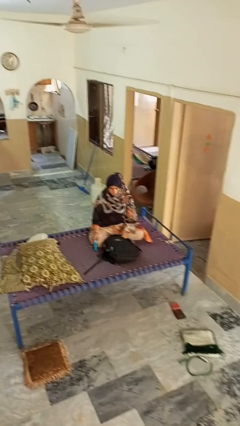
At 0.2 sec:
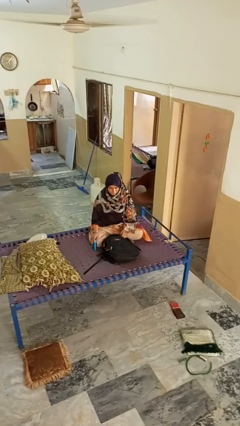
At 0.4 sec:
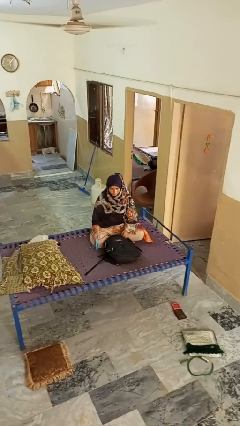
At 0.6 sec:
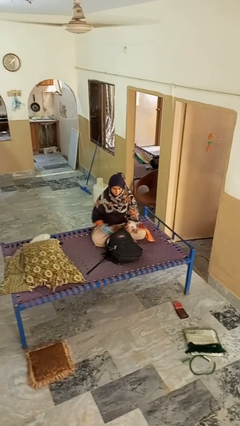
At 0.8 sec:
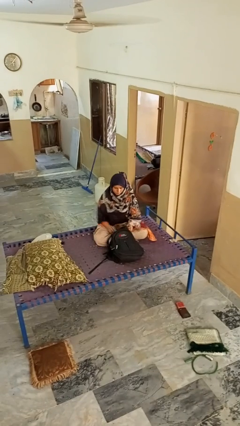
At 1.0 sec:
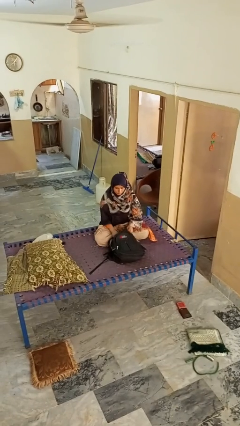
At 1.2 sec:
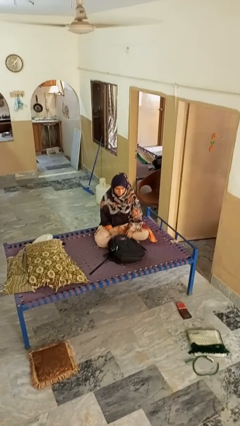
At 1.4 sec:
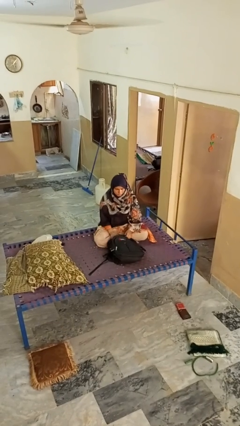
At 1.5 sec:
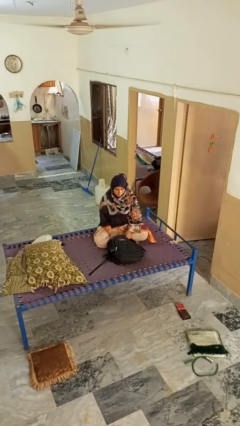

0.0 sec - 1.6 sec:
person puts object into bag

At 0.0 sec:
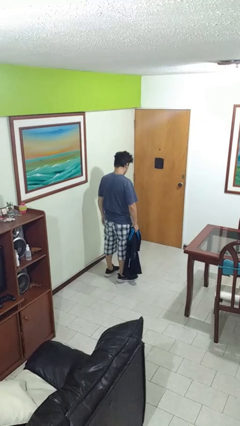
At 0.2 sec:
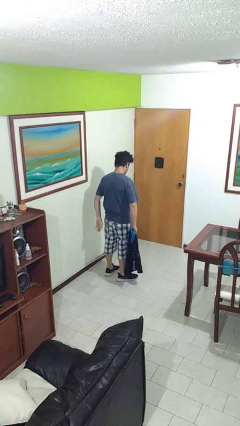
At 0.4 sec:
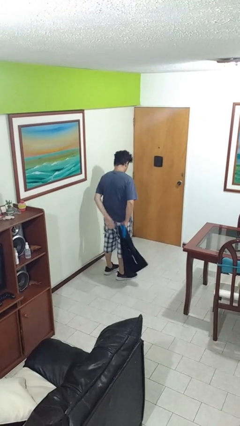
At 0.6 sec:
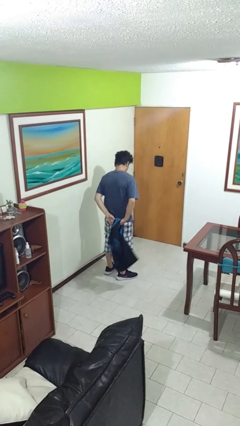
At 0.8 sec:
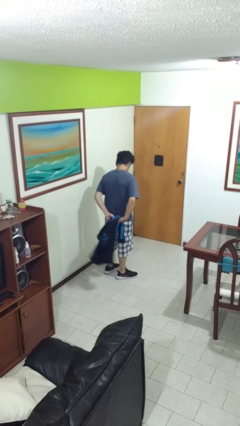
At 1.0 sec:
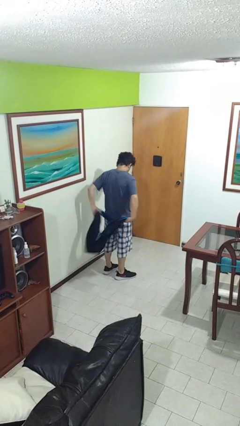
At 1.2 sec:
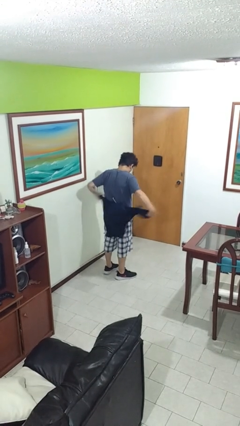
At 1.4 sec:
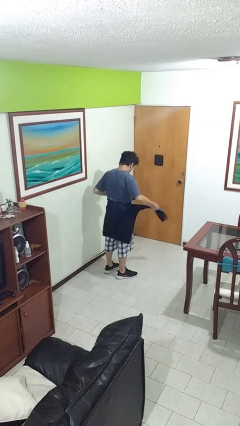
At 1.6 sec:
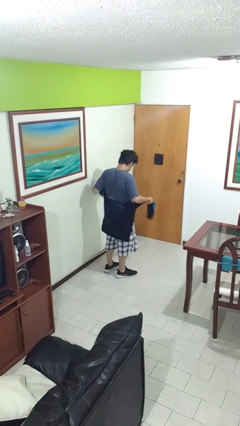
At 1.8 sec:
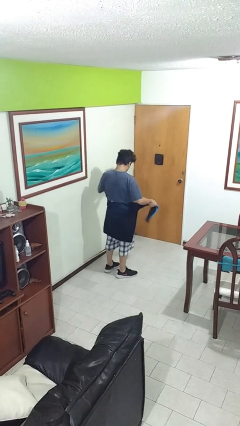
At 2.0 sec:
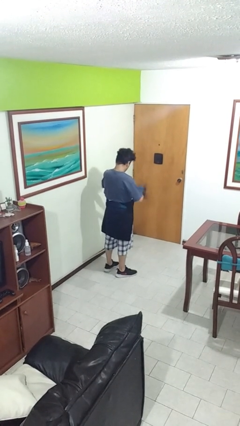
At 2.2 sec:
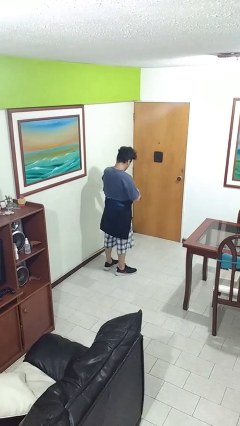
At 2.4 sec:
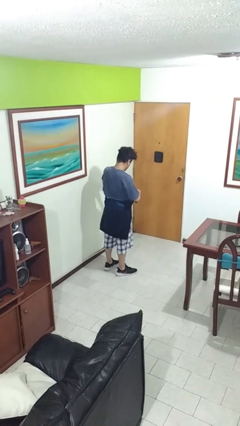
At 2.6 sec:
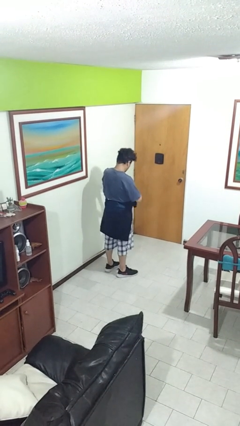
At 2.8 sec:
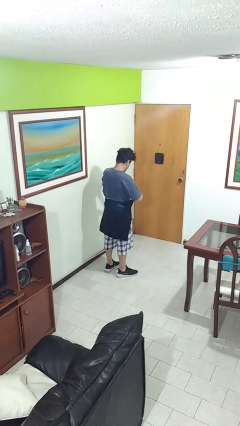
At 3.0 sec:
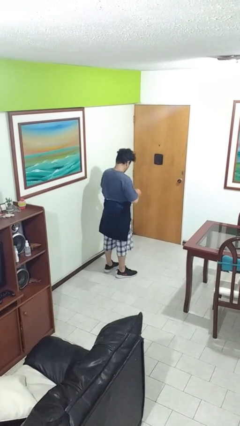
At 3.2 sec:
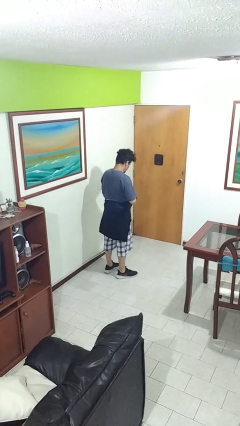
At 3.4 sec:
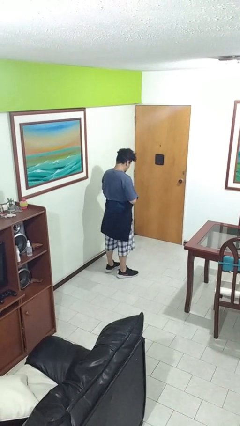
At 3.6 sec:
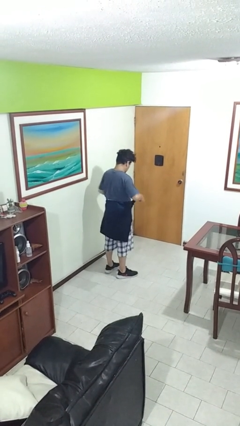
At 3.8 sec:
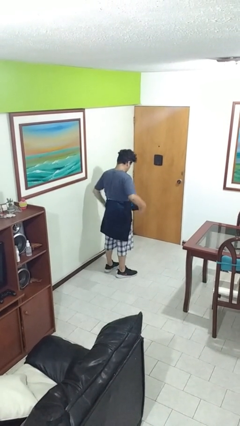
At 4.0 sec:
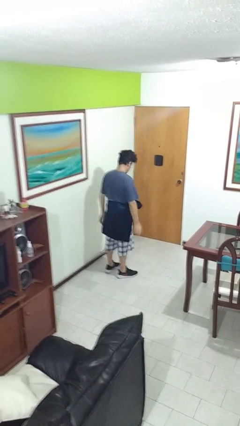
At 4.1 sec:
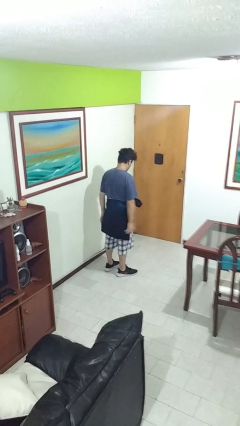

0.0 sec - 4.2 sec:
person ties jacket around waist

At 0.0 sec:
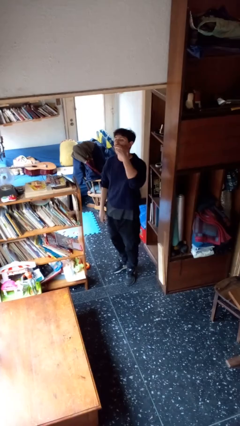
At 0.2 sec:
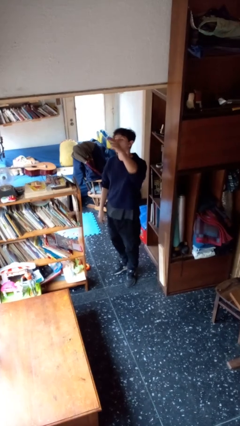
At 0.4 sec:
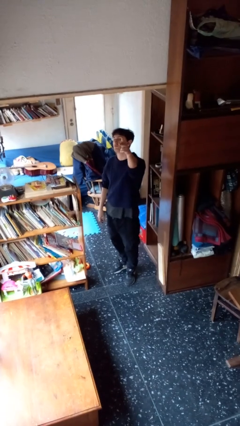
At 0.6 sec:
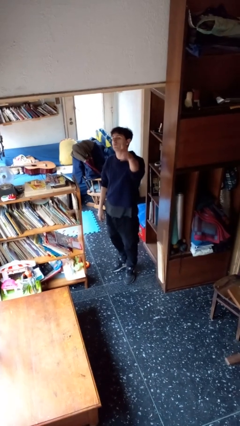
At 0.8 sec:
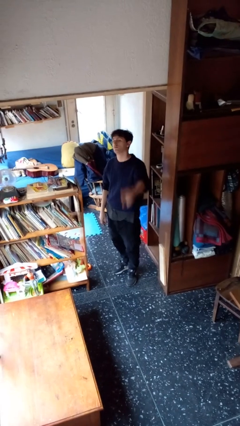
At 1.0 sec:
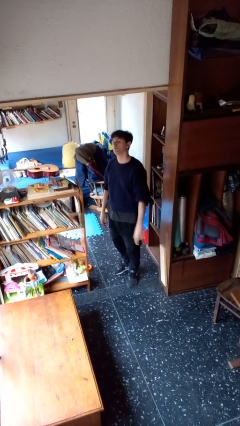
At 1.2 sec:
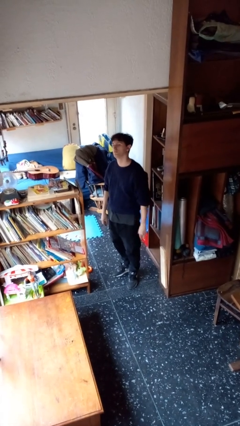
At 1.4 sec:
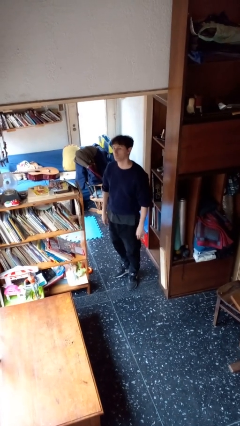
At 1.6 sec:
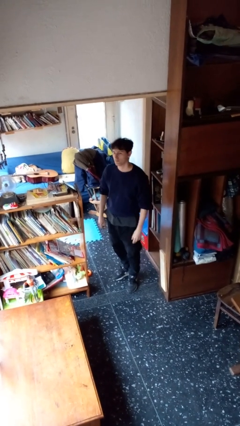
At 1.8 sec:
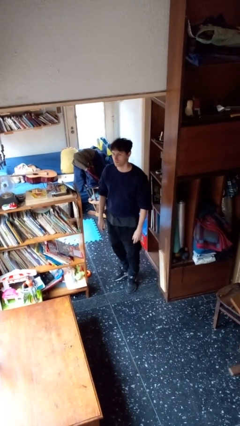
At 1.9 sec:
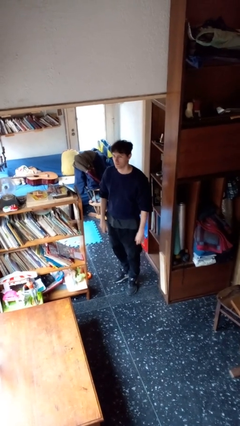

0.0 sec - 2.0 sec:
person gestures blow kiss

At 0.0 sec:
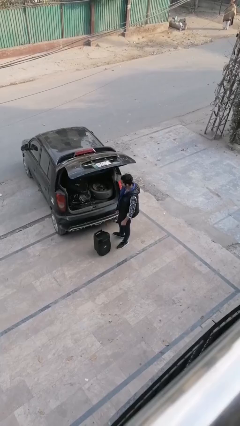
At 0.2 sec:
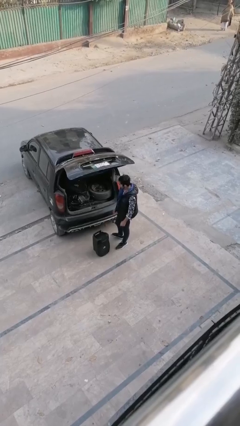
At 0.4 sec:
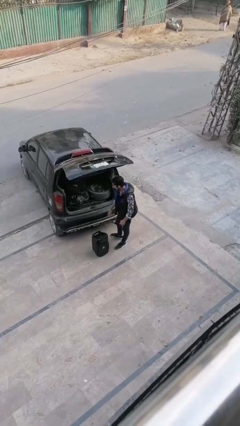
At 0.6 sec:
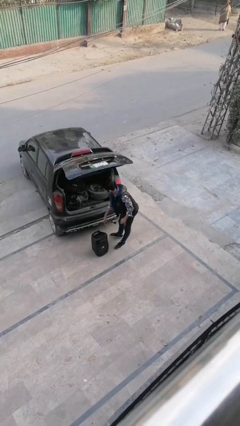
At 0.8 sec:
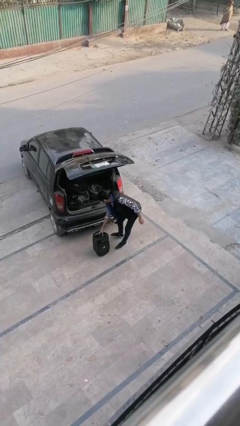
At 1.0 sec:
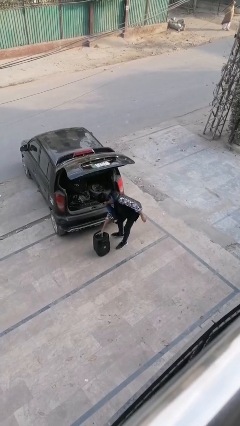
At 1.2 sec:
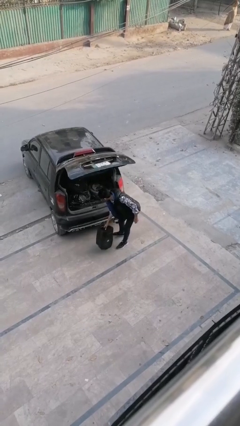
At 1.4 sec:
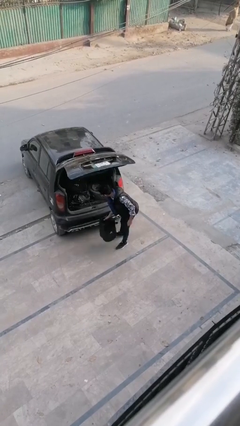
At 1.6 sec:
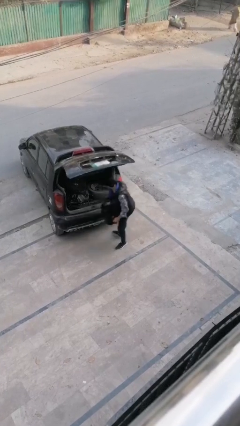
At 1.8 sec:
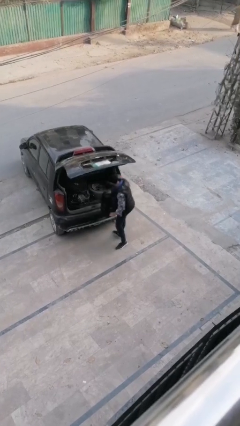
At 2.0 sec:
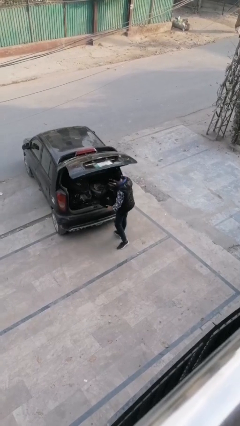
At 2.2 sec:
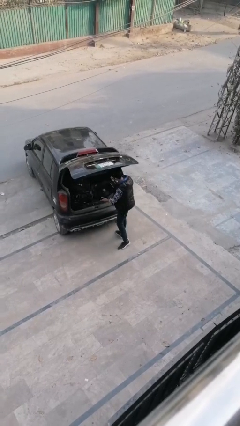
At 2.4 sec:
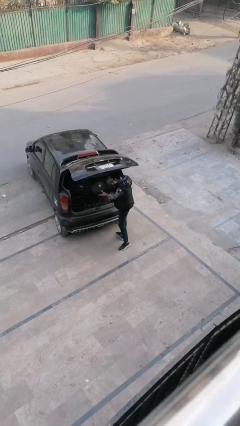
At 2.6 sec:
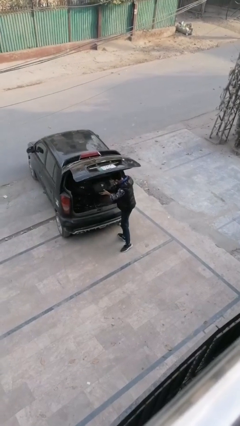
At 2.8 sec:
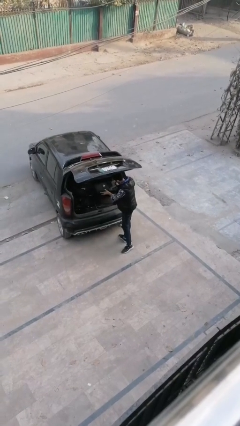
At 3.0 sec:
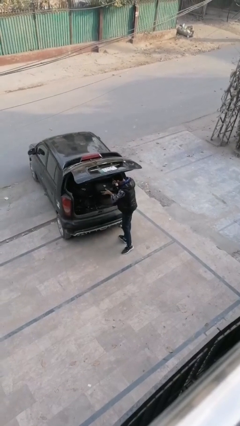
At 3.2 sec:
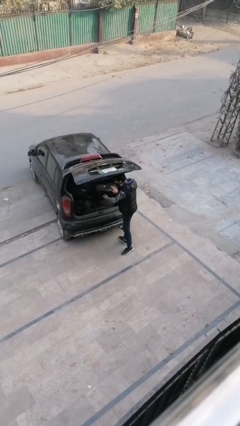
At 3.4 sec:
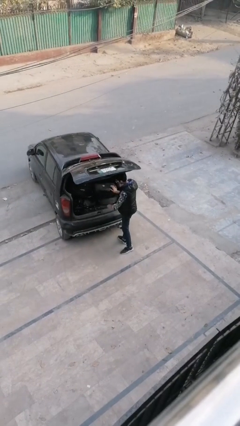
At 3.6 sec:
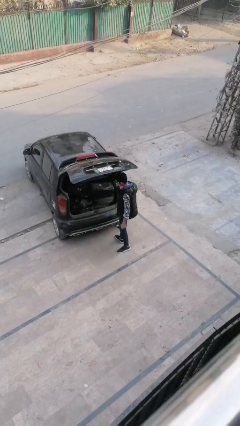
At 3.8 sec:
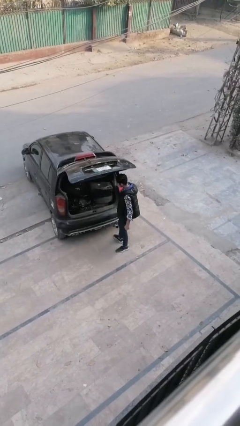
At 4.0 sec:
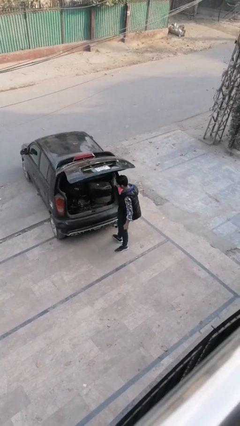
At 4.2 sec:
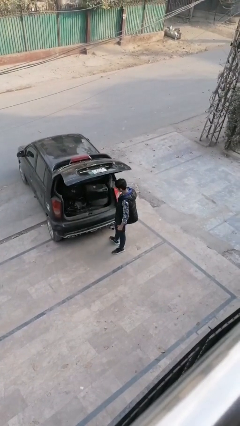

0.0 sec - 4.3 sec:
person loads car

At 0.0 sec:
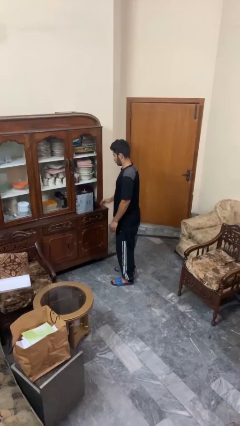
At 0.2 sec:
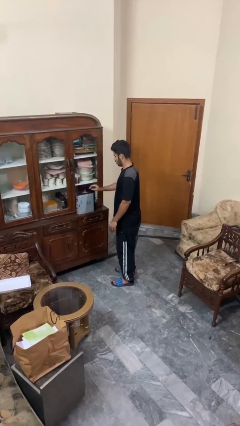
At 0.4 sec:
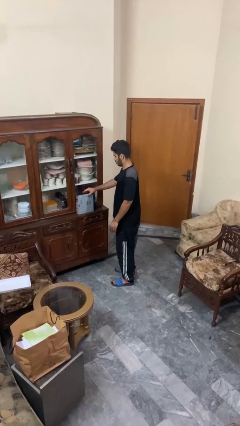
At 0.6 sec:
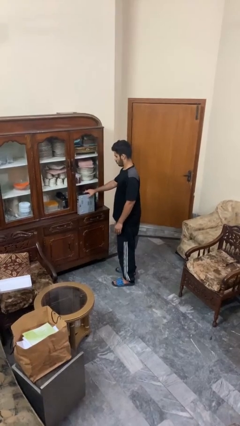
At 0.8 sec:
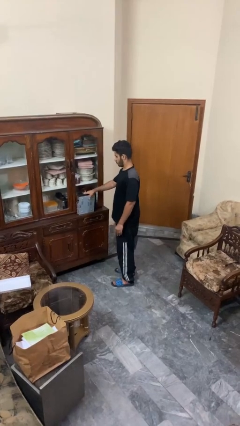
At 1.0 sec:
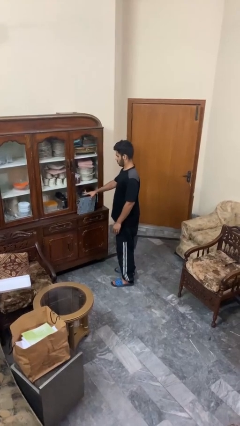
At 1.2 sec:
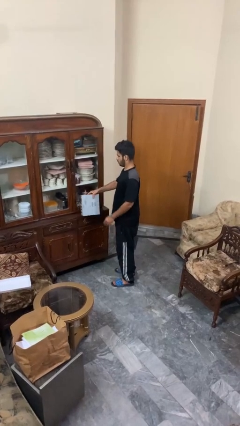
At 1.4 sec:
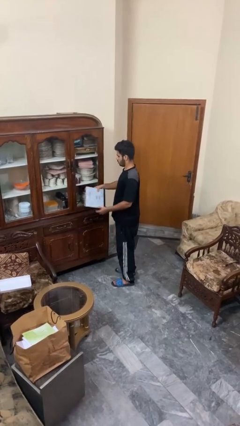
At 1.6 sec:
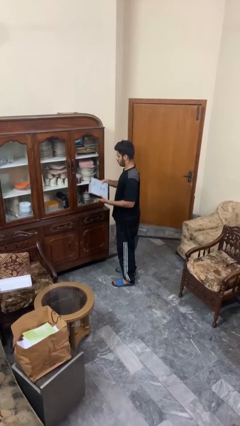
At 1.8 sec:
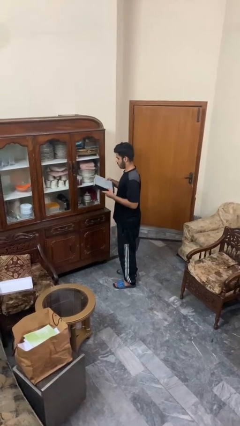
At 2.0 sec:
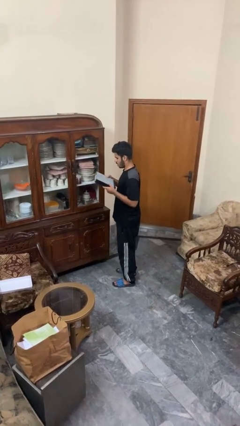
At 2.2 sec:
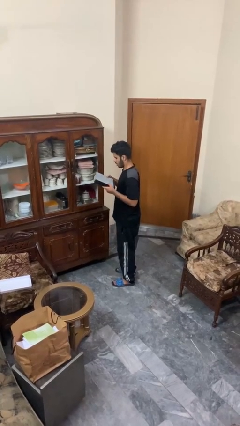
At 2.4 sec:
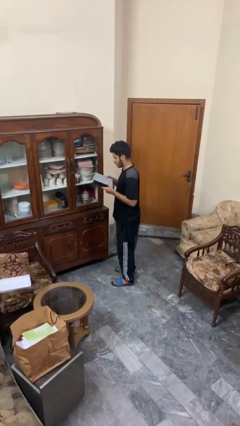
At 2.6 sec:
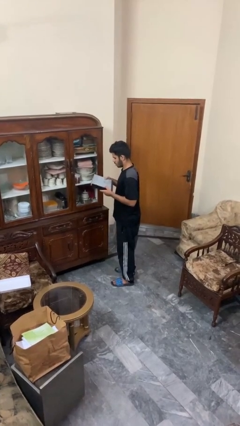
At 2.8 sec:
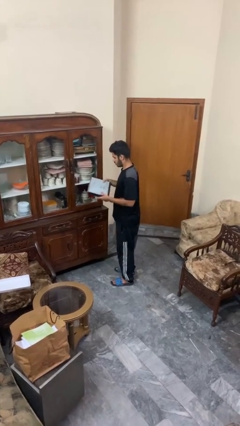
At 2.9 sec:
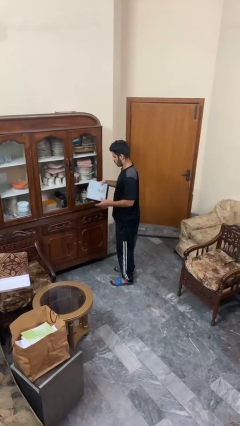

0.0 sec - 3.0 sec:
person picks up object from countertop

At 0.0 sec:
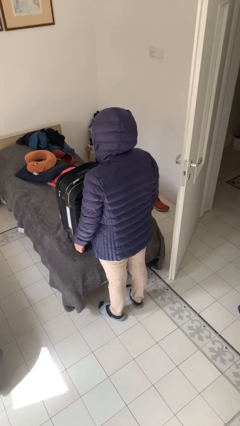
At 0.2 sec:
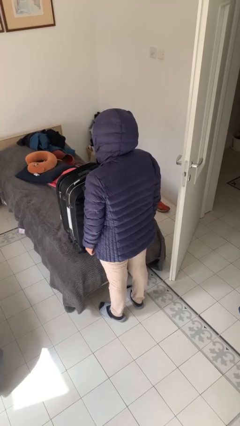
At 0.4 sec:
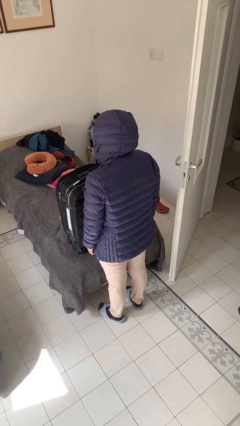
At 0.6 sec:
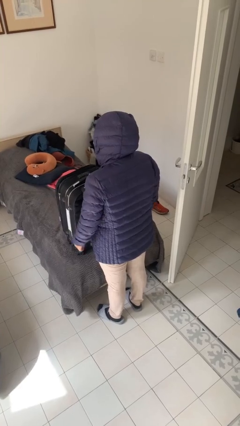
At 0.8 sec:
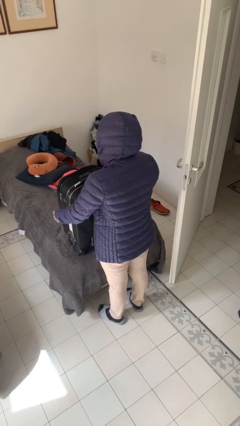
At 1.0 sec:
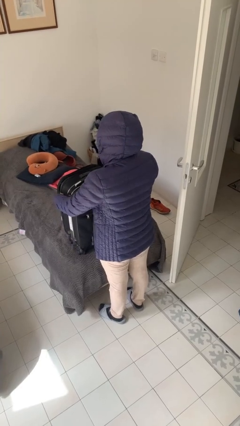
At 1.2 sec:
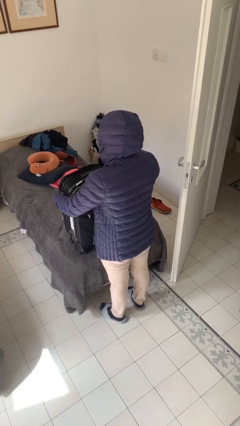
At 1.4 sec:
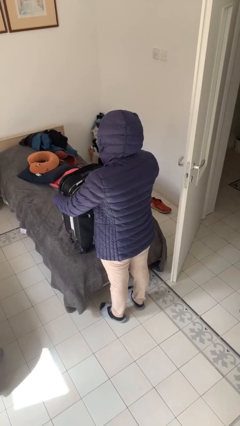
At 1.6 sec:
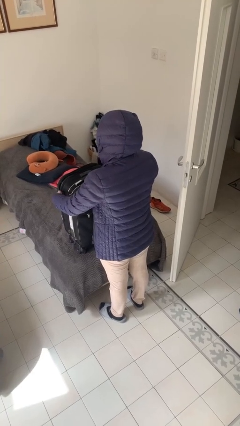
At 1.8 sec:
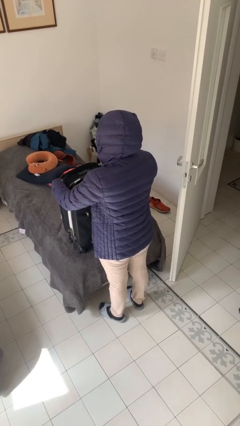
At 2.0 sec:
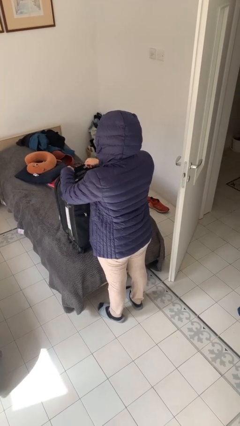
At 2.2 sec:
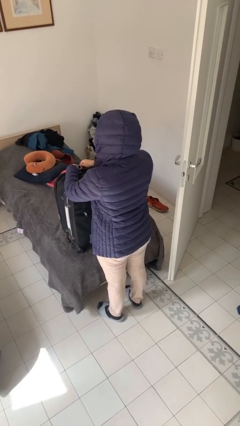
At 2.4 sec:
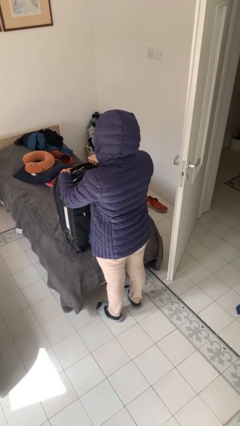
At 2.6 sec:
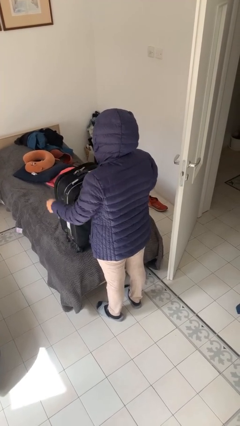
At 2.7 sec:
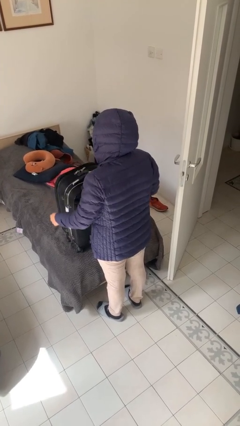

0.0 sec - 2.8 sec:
person closes suitcase
